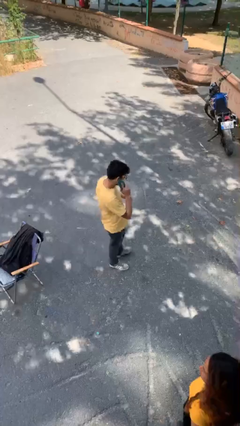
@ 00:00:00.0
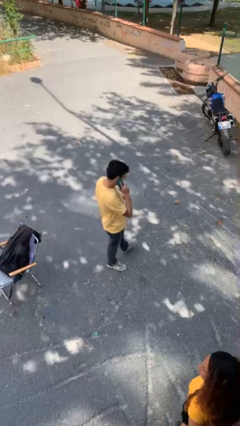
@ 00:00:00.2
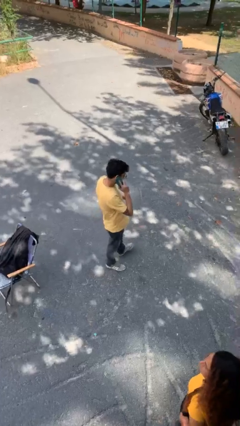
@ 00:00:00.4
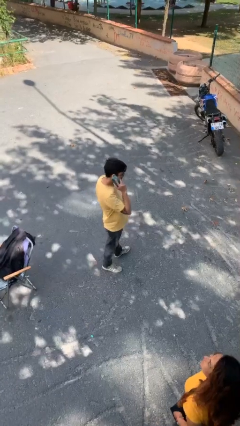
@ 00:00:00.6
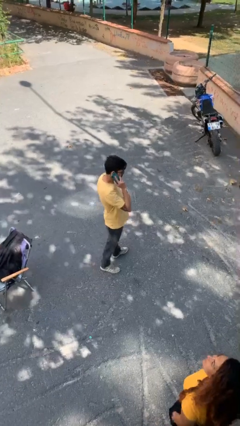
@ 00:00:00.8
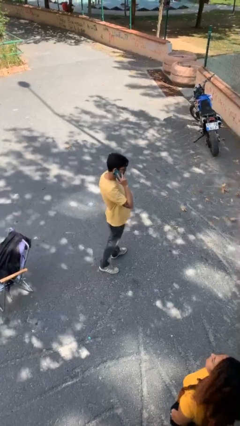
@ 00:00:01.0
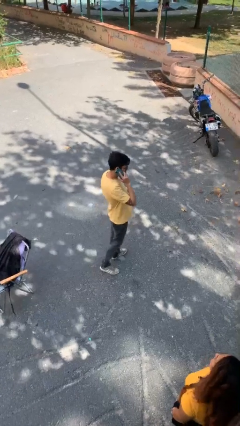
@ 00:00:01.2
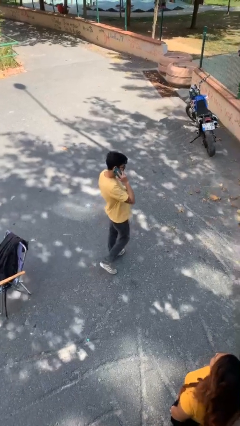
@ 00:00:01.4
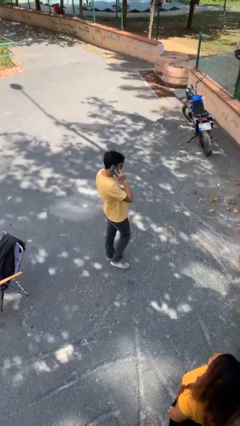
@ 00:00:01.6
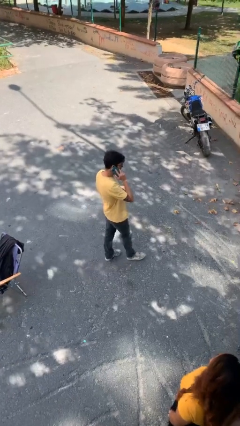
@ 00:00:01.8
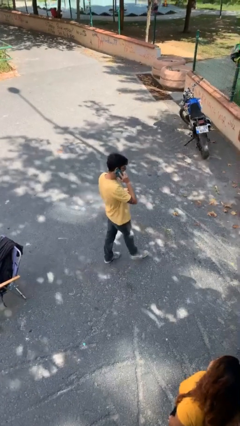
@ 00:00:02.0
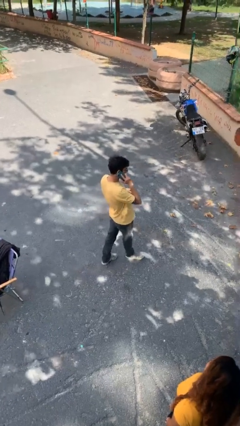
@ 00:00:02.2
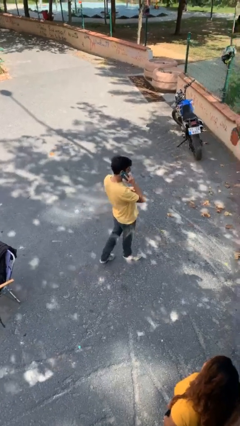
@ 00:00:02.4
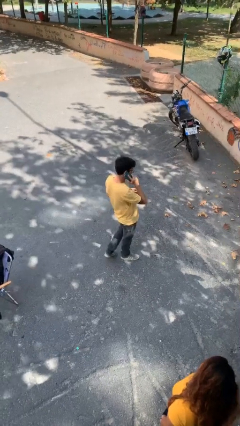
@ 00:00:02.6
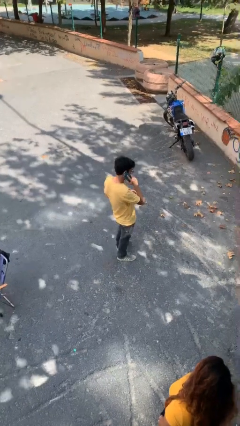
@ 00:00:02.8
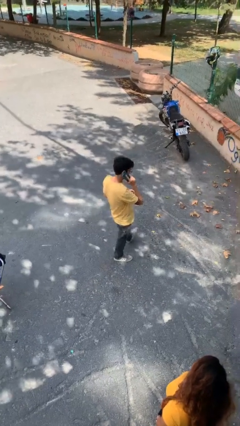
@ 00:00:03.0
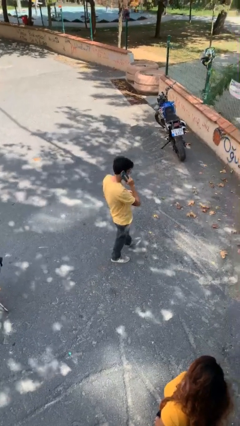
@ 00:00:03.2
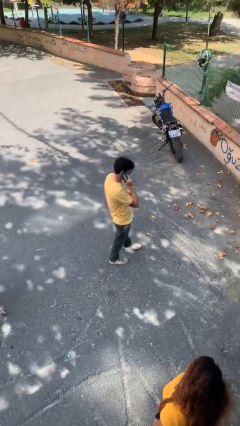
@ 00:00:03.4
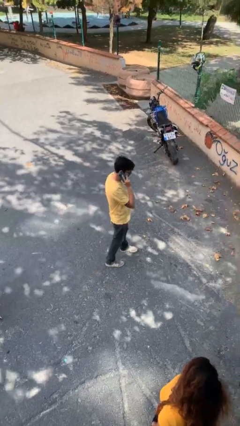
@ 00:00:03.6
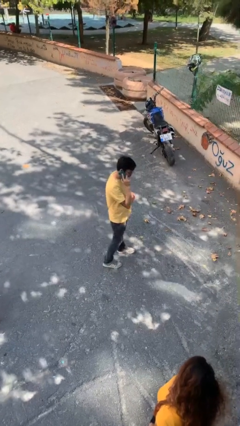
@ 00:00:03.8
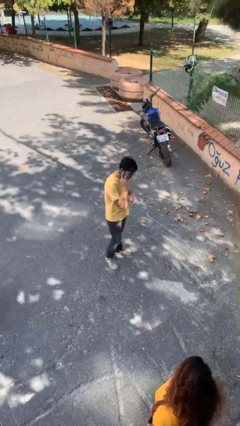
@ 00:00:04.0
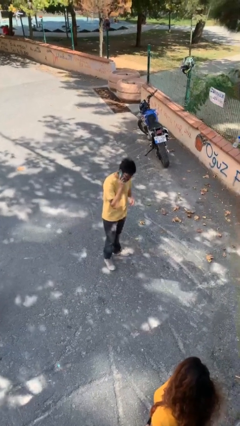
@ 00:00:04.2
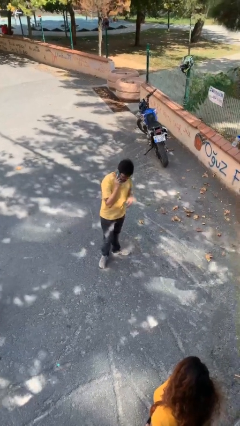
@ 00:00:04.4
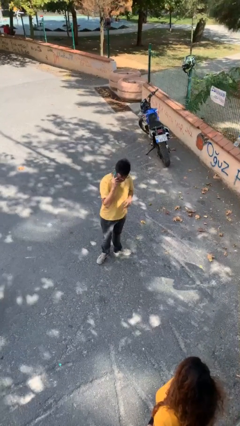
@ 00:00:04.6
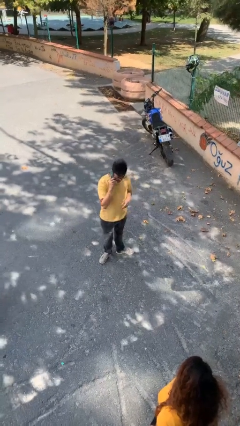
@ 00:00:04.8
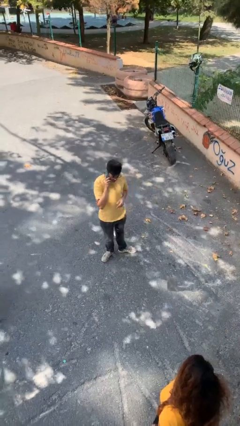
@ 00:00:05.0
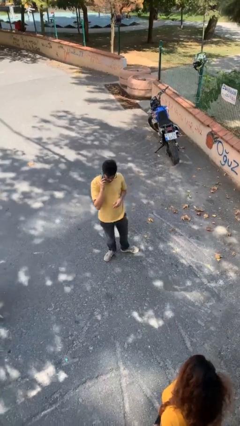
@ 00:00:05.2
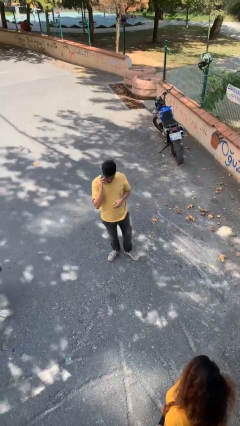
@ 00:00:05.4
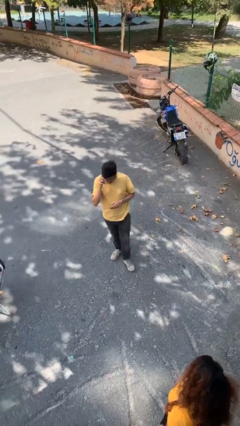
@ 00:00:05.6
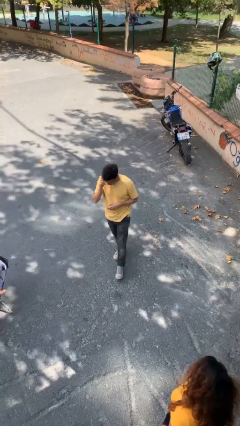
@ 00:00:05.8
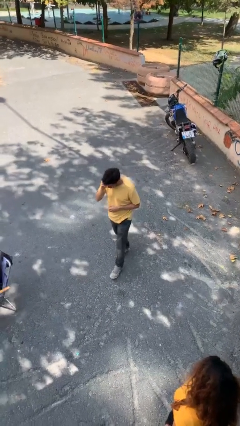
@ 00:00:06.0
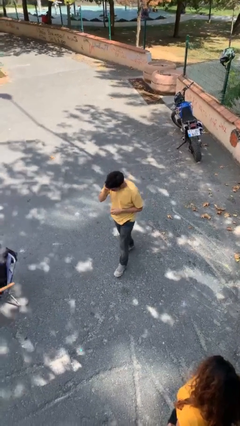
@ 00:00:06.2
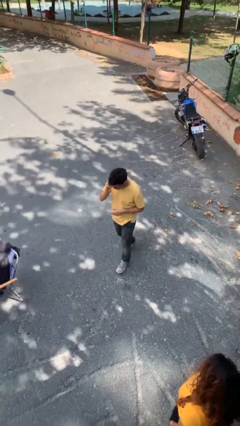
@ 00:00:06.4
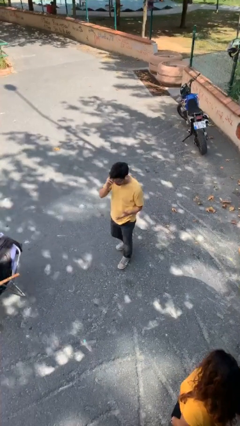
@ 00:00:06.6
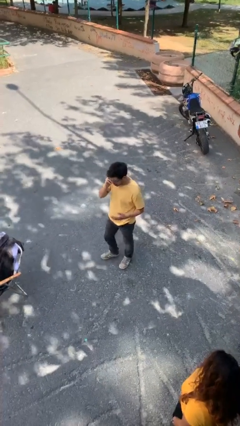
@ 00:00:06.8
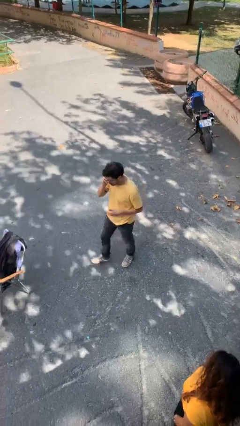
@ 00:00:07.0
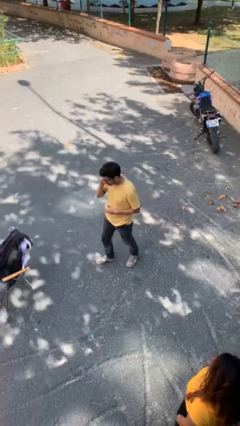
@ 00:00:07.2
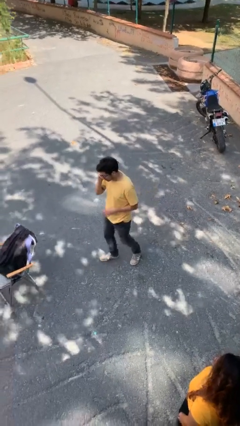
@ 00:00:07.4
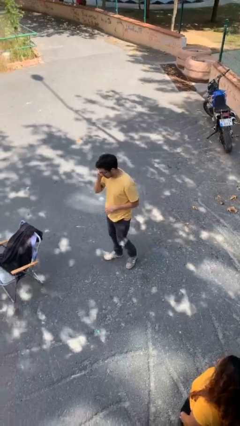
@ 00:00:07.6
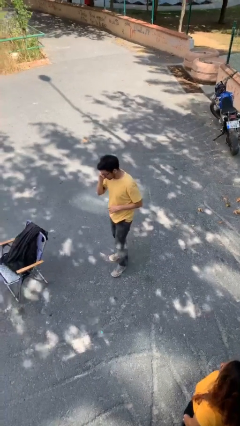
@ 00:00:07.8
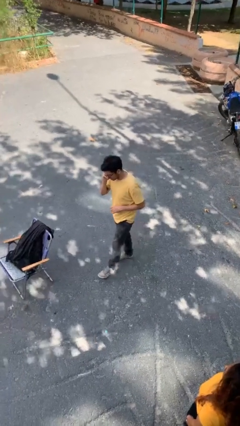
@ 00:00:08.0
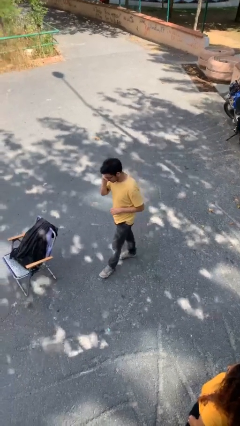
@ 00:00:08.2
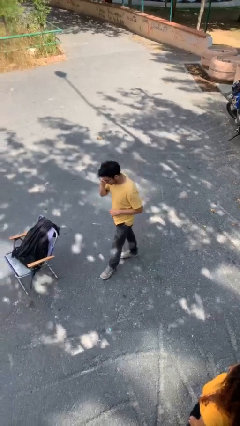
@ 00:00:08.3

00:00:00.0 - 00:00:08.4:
person talks on phone

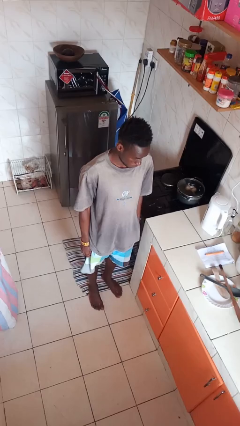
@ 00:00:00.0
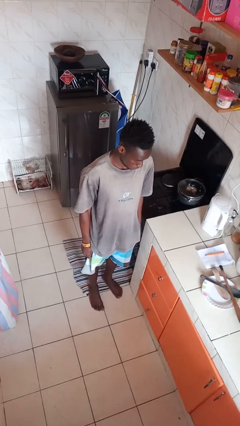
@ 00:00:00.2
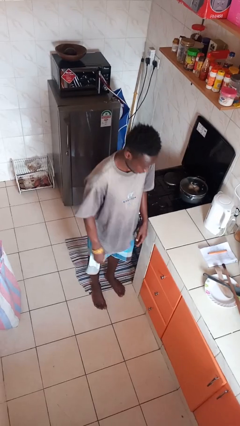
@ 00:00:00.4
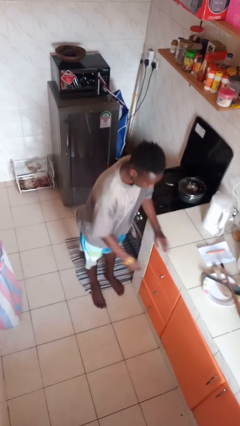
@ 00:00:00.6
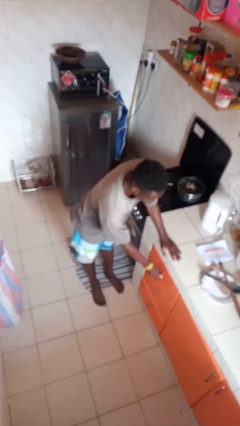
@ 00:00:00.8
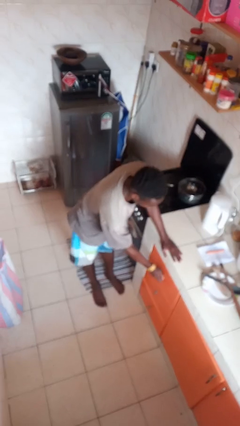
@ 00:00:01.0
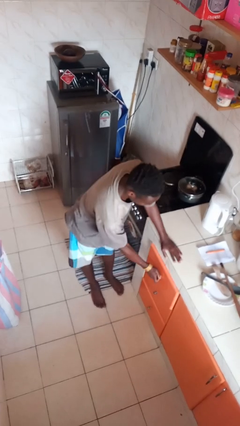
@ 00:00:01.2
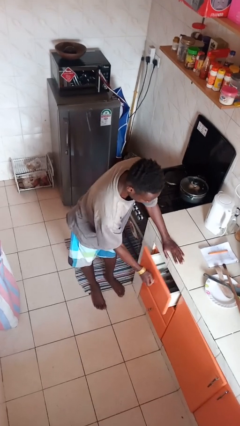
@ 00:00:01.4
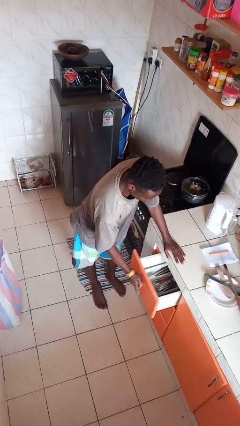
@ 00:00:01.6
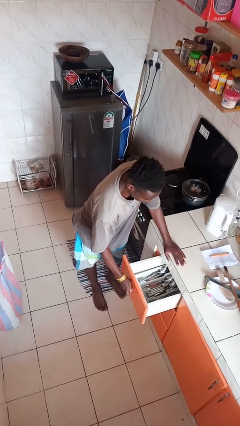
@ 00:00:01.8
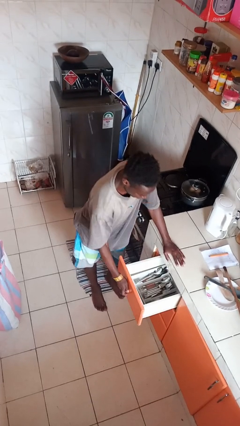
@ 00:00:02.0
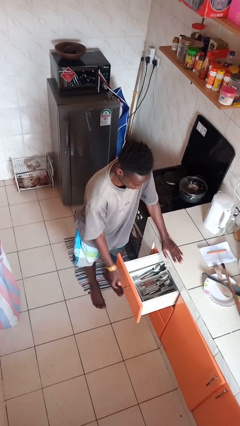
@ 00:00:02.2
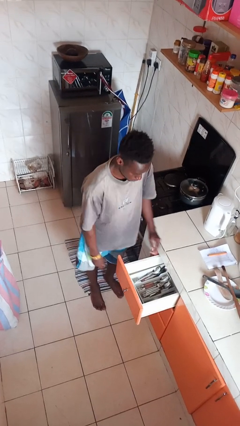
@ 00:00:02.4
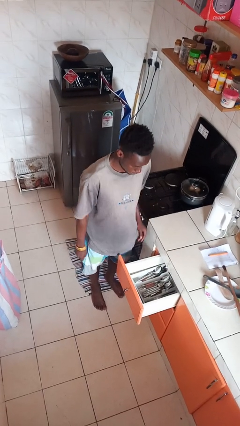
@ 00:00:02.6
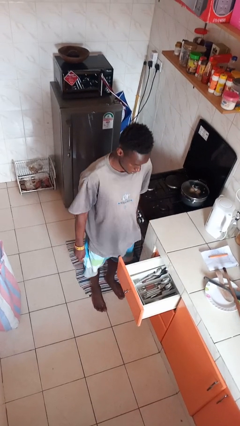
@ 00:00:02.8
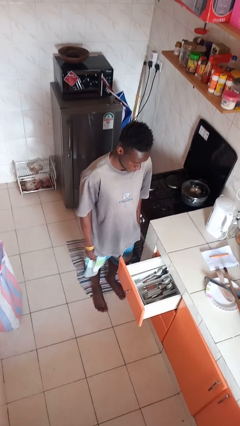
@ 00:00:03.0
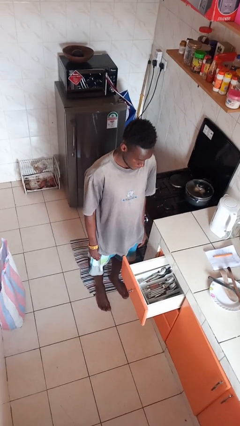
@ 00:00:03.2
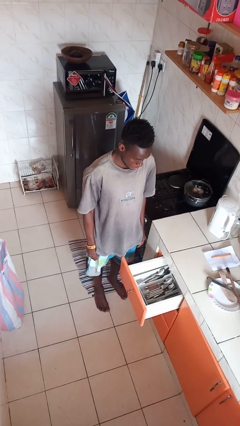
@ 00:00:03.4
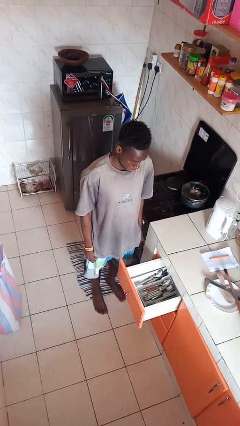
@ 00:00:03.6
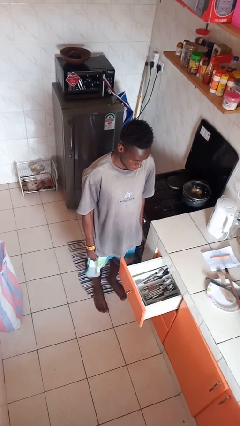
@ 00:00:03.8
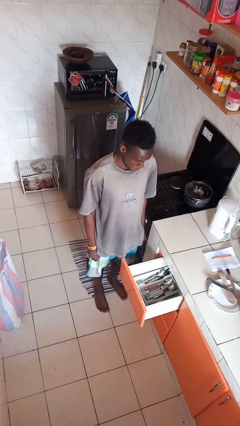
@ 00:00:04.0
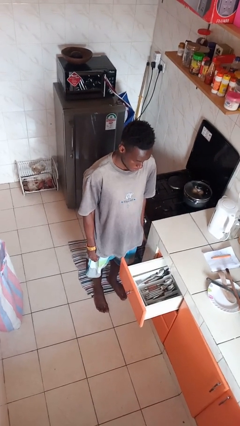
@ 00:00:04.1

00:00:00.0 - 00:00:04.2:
person opens kitchen drawer

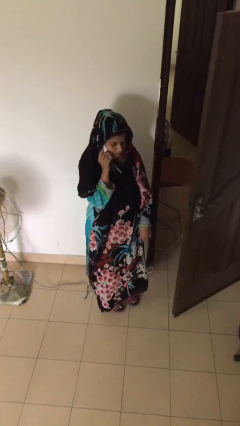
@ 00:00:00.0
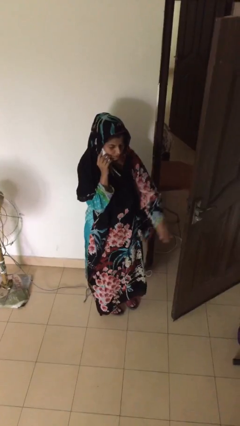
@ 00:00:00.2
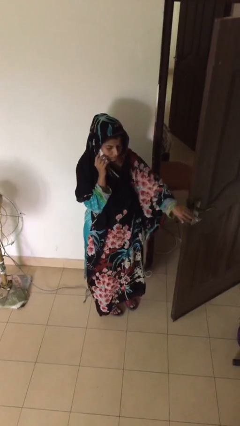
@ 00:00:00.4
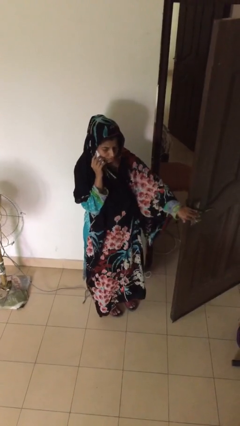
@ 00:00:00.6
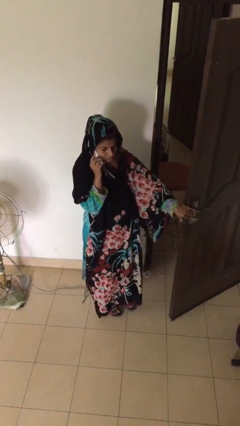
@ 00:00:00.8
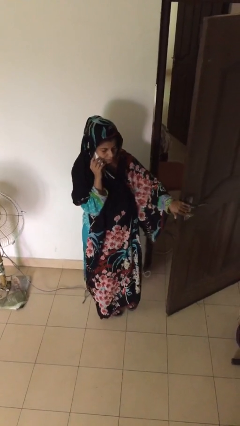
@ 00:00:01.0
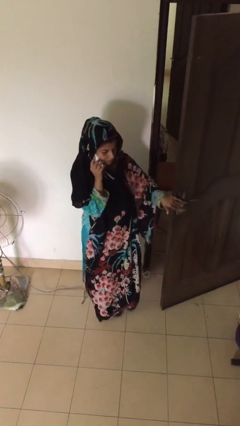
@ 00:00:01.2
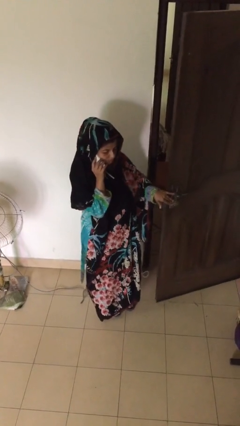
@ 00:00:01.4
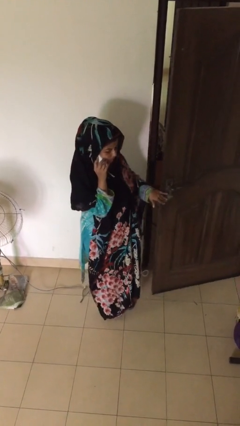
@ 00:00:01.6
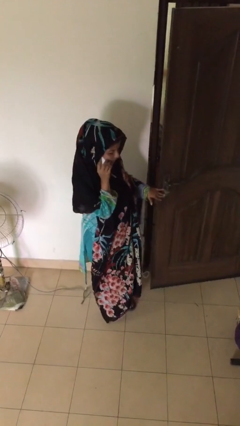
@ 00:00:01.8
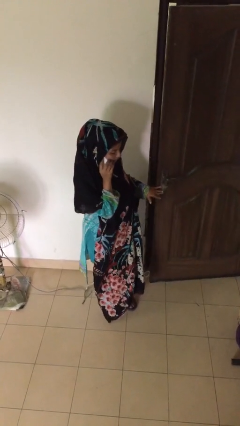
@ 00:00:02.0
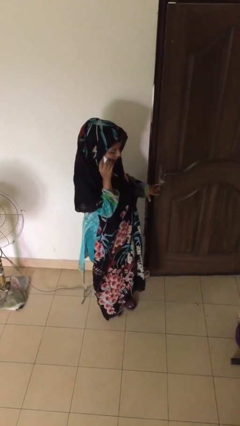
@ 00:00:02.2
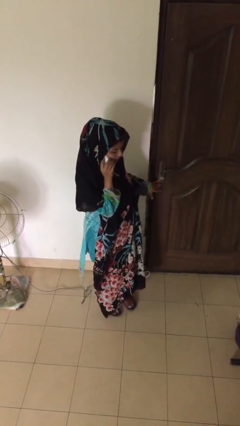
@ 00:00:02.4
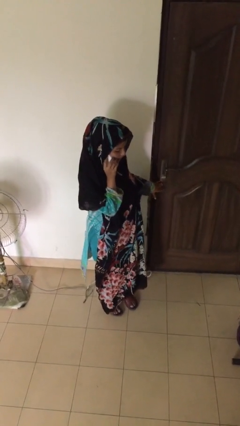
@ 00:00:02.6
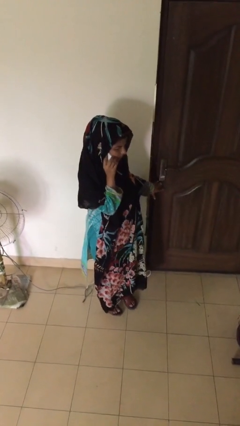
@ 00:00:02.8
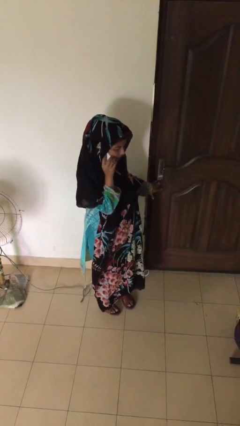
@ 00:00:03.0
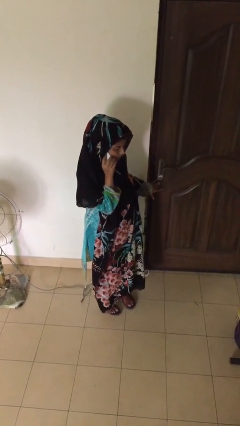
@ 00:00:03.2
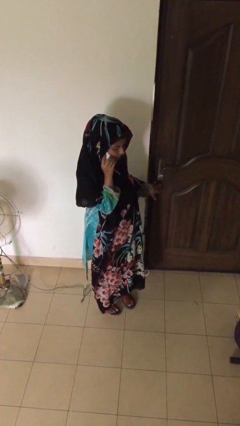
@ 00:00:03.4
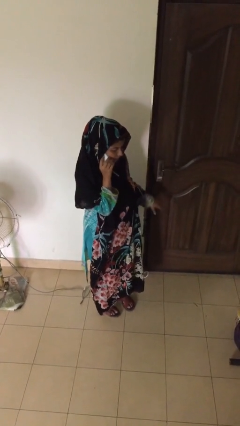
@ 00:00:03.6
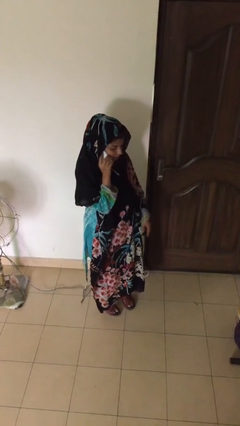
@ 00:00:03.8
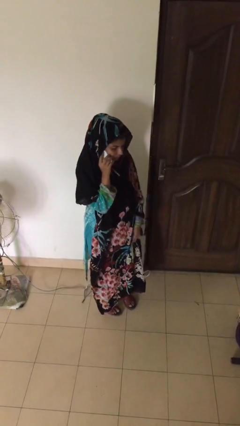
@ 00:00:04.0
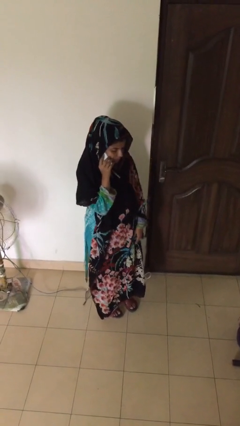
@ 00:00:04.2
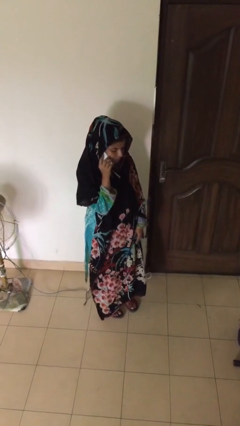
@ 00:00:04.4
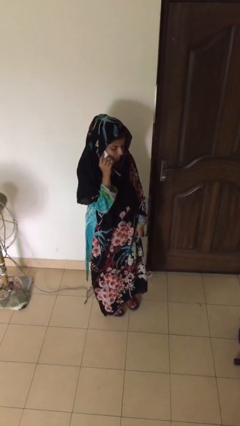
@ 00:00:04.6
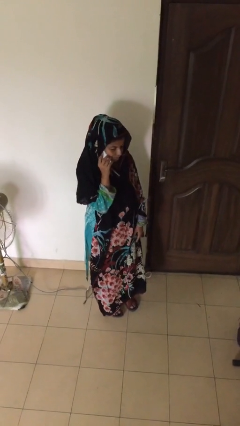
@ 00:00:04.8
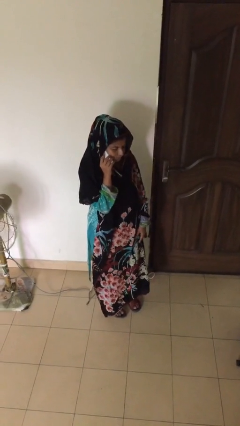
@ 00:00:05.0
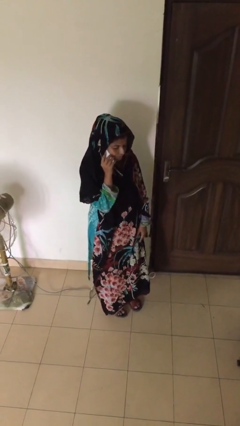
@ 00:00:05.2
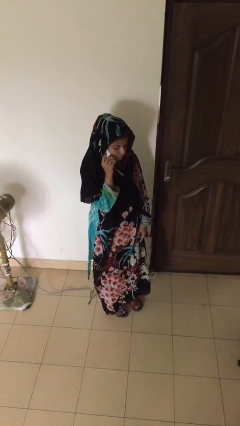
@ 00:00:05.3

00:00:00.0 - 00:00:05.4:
person closes facility door
